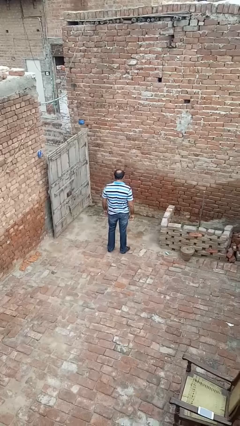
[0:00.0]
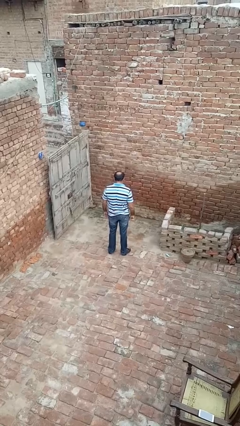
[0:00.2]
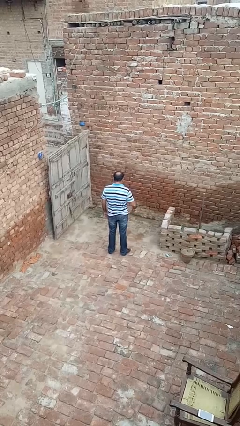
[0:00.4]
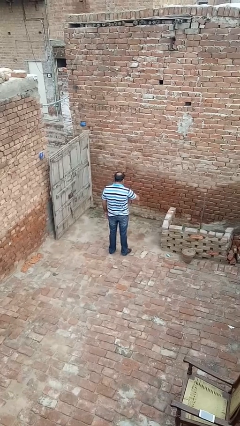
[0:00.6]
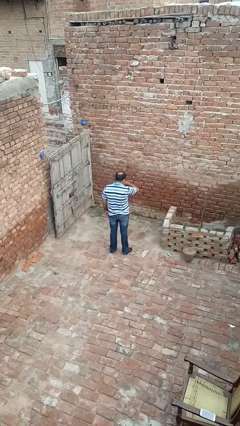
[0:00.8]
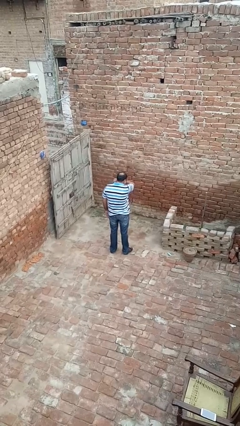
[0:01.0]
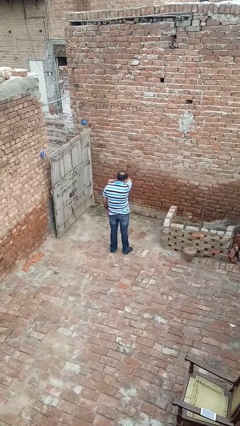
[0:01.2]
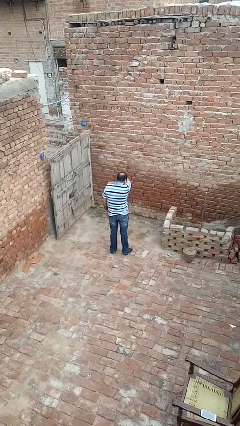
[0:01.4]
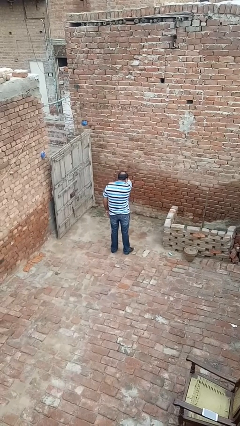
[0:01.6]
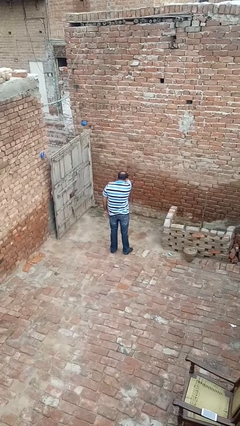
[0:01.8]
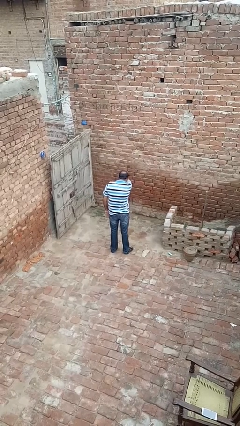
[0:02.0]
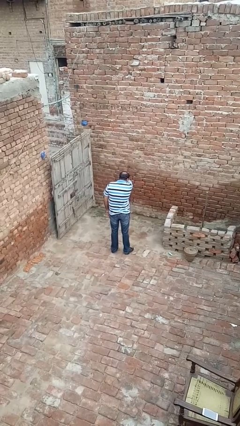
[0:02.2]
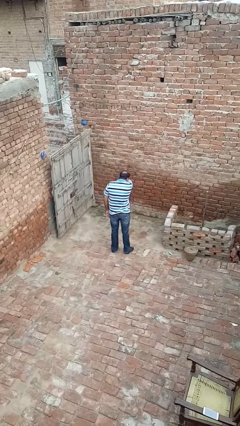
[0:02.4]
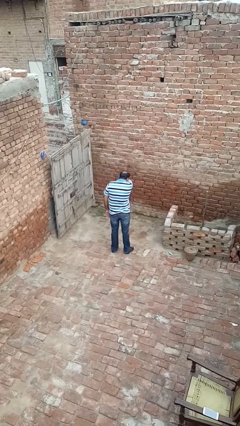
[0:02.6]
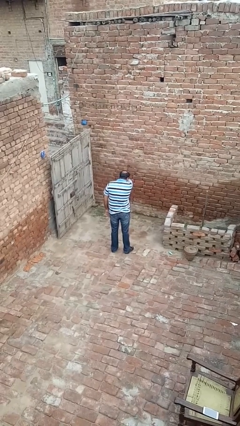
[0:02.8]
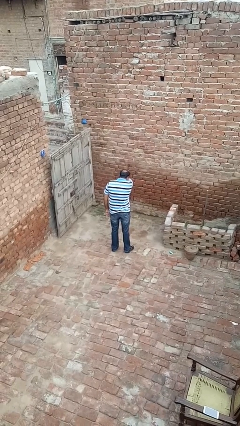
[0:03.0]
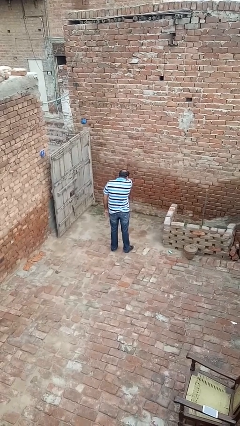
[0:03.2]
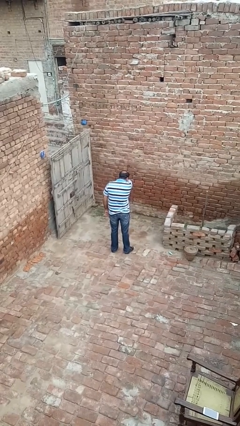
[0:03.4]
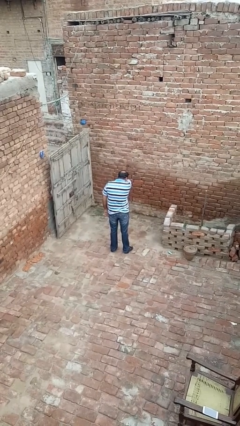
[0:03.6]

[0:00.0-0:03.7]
person sneezes into arm

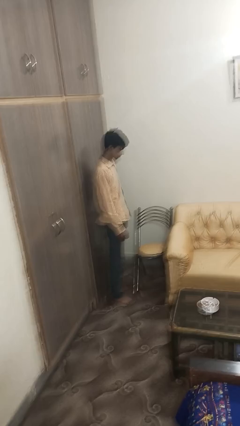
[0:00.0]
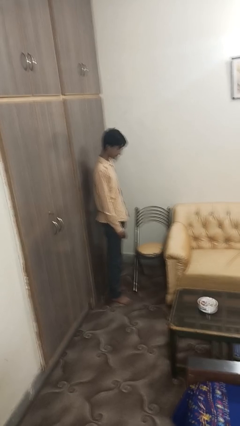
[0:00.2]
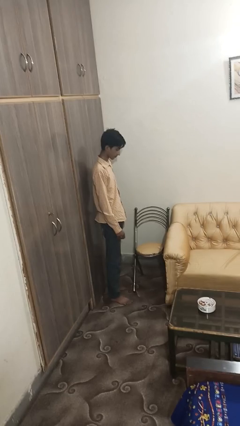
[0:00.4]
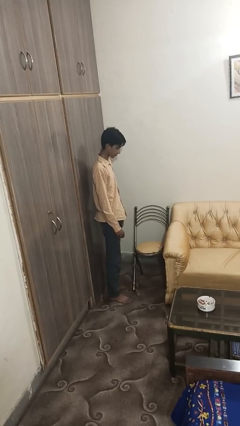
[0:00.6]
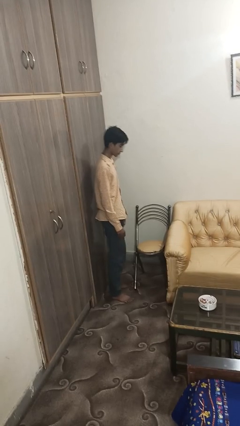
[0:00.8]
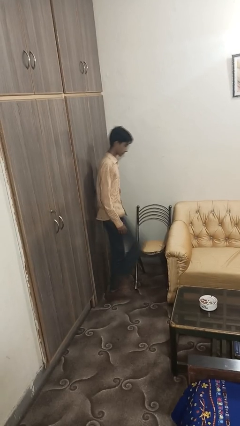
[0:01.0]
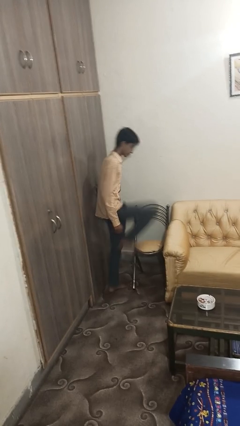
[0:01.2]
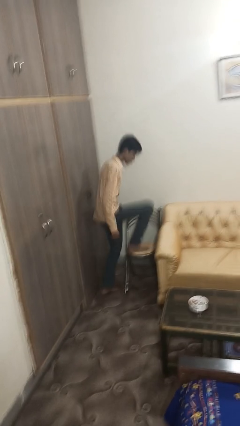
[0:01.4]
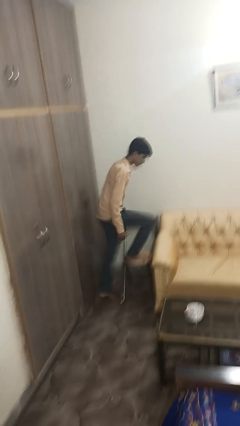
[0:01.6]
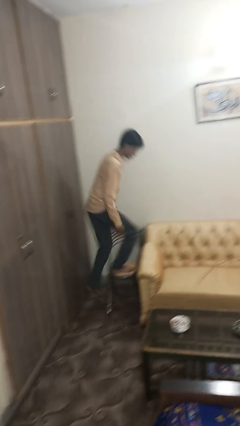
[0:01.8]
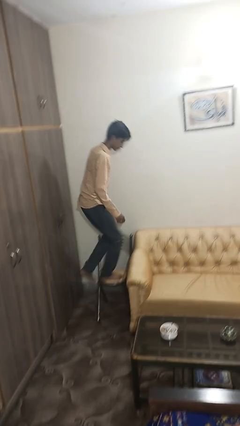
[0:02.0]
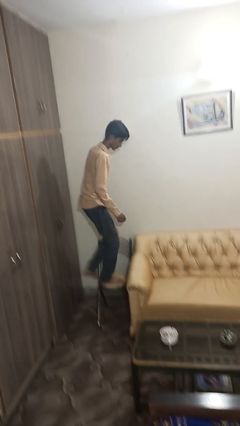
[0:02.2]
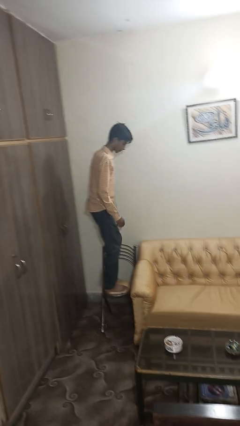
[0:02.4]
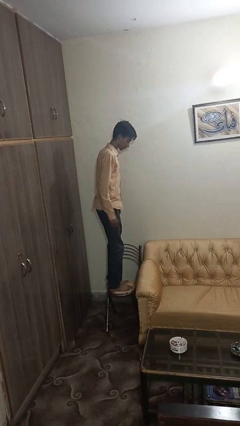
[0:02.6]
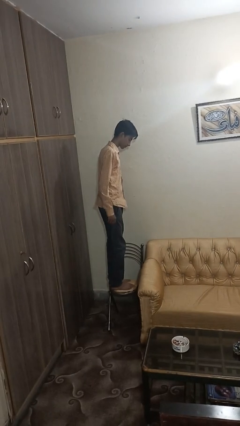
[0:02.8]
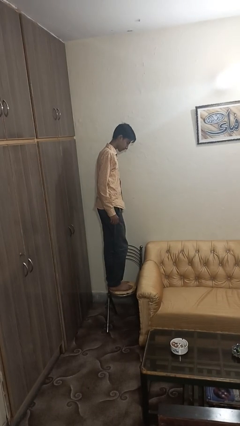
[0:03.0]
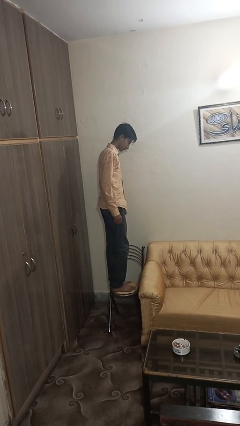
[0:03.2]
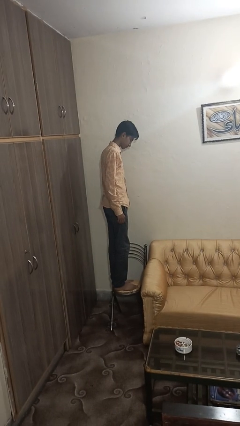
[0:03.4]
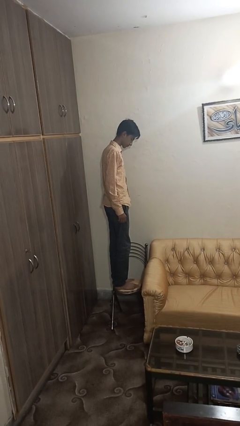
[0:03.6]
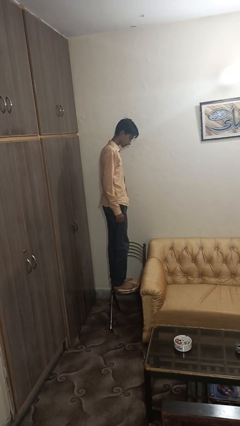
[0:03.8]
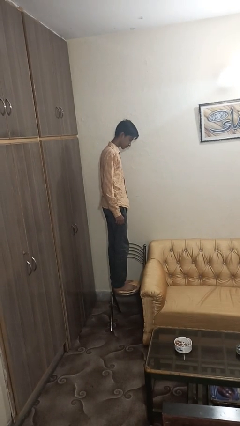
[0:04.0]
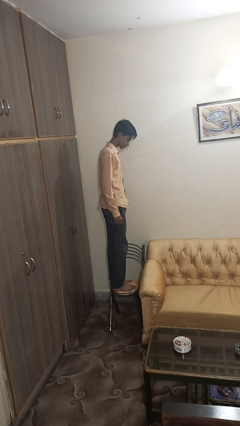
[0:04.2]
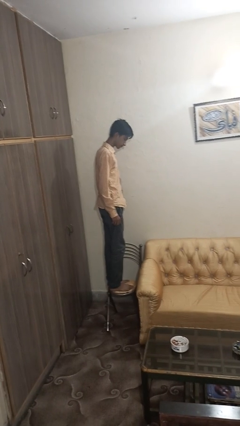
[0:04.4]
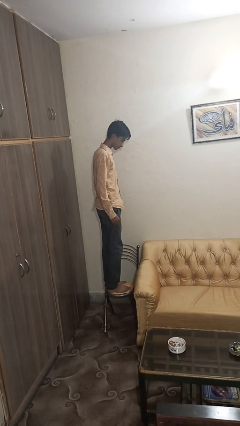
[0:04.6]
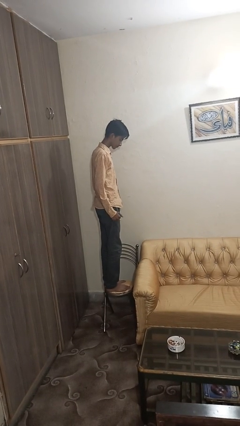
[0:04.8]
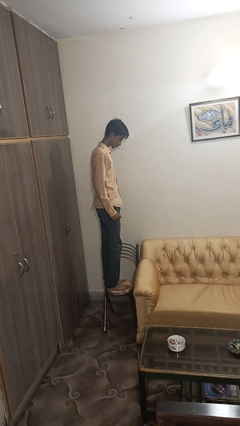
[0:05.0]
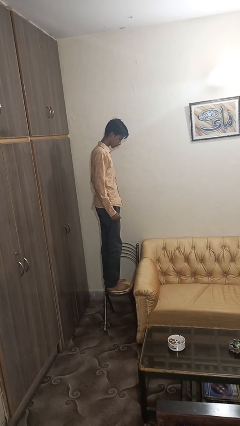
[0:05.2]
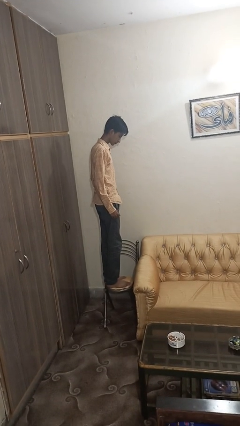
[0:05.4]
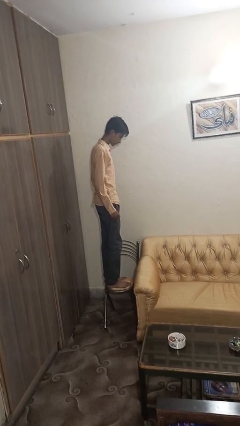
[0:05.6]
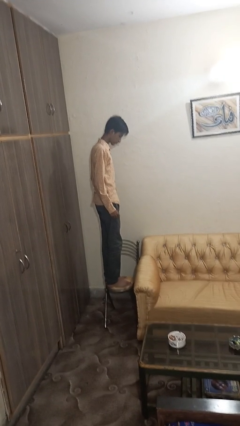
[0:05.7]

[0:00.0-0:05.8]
person climbs on chair

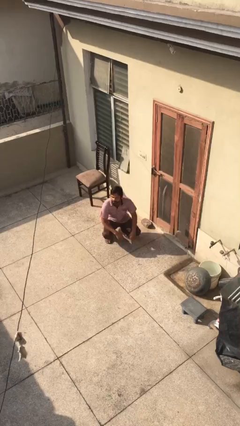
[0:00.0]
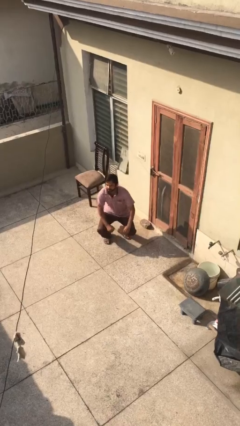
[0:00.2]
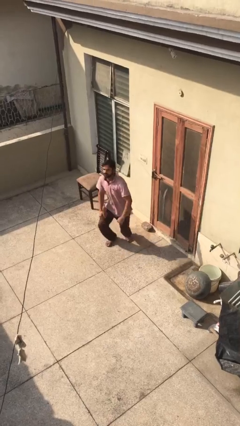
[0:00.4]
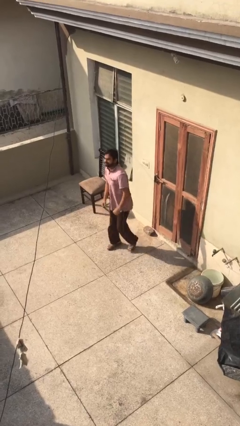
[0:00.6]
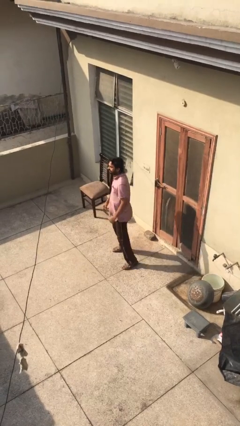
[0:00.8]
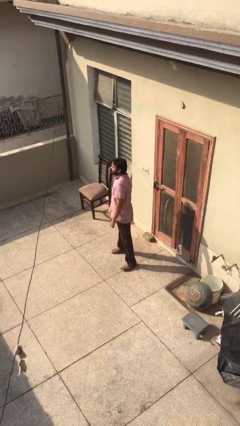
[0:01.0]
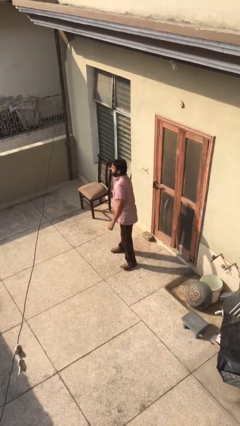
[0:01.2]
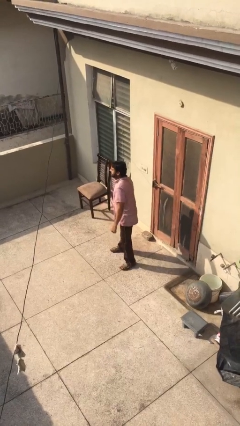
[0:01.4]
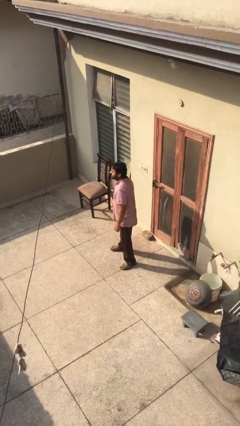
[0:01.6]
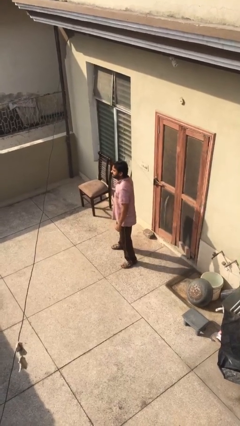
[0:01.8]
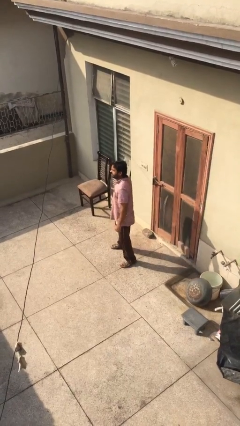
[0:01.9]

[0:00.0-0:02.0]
person stands up

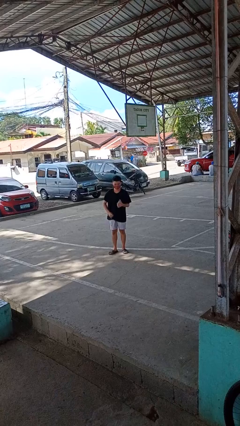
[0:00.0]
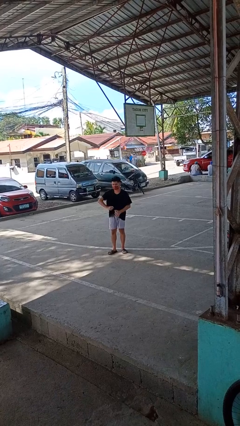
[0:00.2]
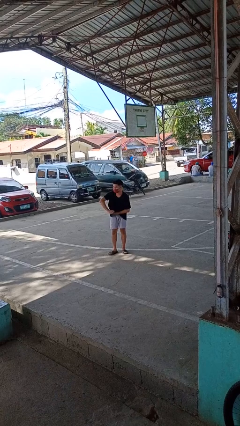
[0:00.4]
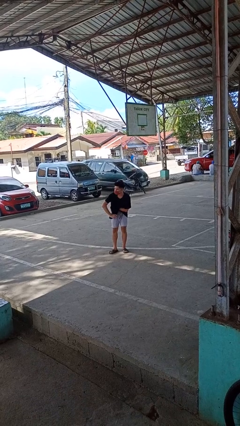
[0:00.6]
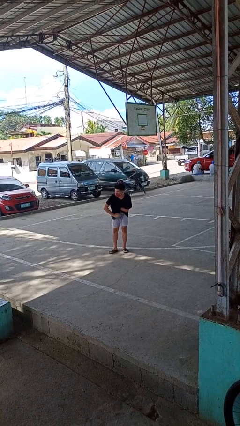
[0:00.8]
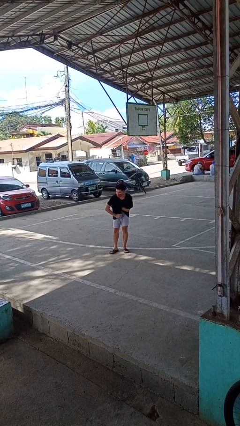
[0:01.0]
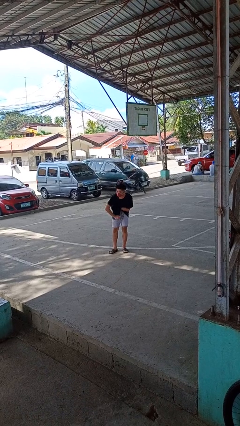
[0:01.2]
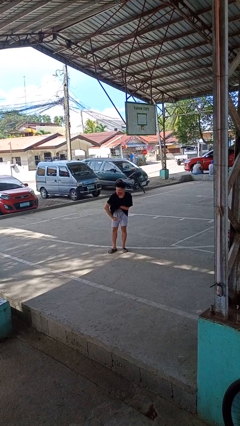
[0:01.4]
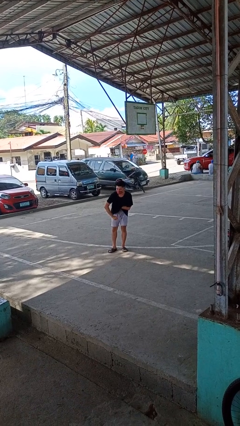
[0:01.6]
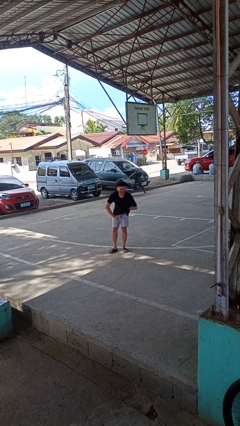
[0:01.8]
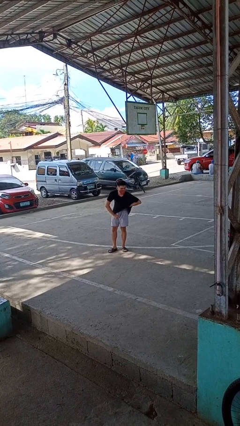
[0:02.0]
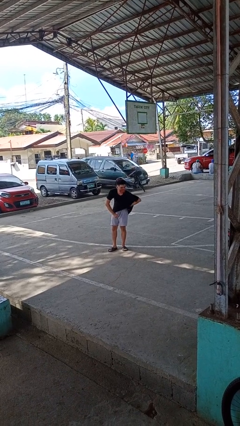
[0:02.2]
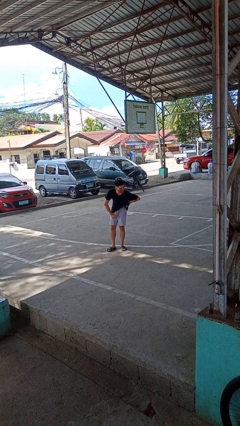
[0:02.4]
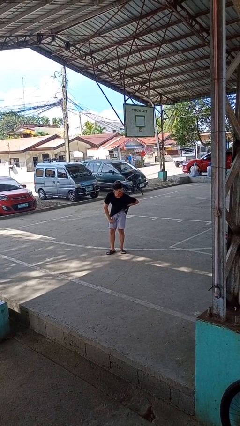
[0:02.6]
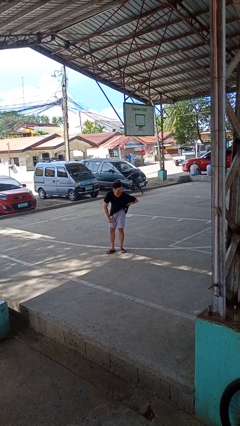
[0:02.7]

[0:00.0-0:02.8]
person applies deodorant

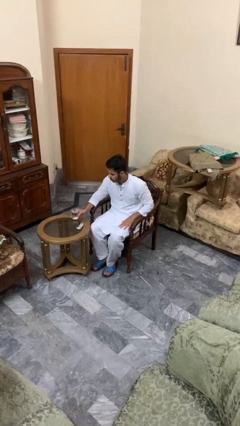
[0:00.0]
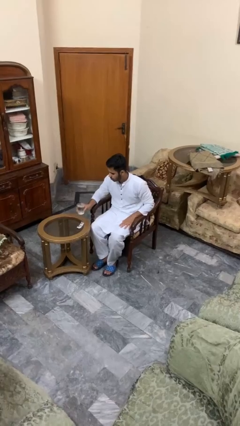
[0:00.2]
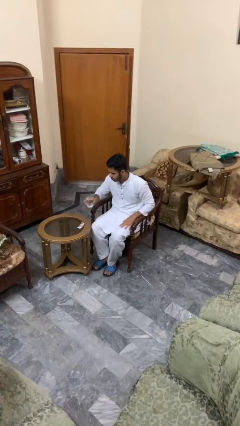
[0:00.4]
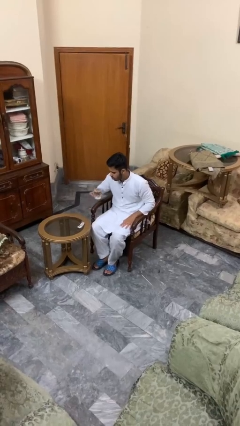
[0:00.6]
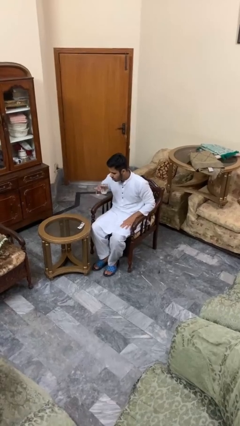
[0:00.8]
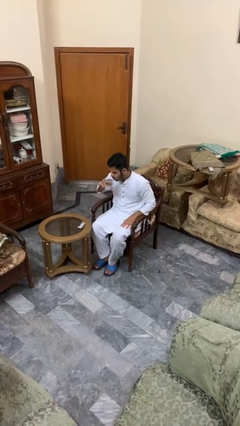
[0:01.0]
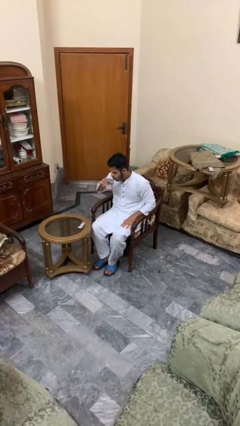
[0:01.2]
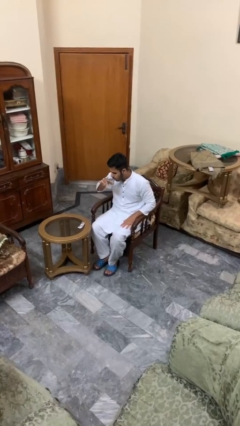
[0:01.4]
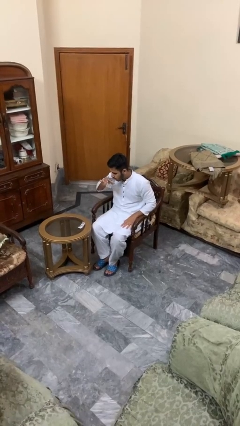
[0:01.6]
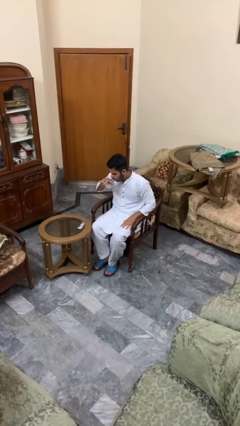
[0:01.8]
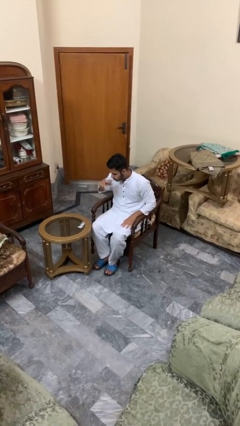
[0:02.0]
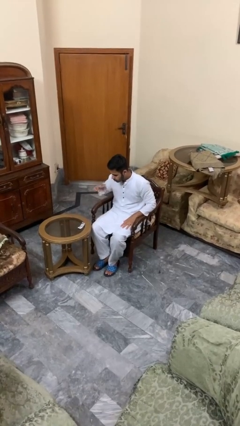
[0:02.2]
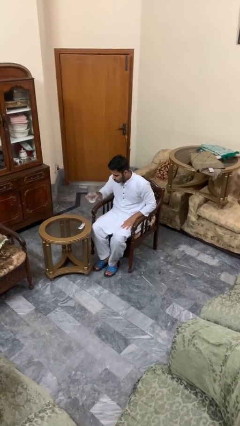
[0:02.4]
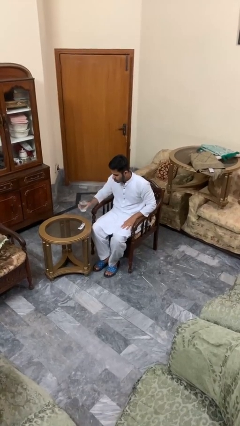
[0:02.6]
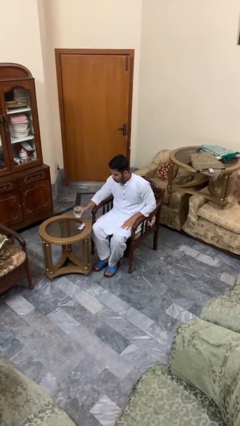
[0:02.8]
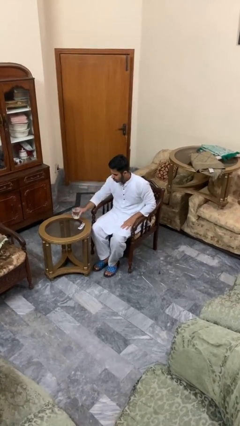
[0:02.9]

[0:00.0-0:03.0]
person drinks from cup

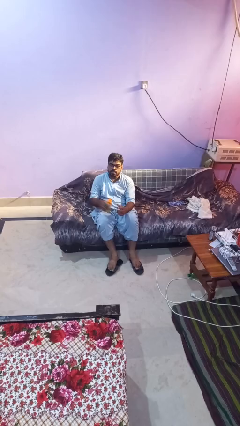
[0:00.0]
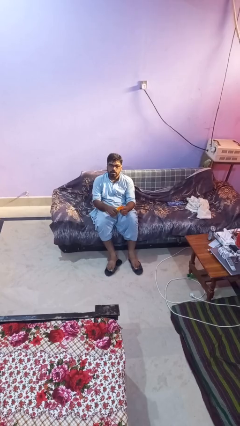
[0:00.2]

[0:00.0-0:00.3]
person applies sunscreen
